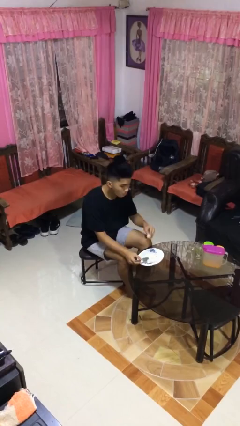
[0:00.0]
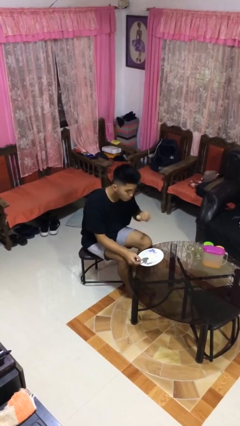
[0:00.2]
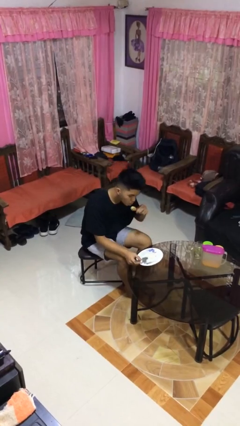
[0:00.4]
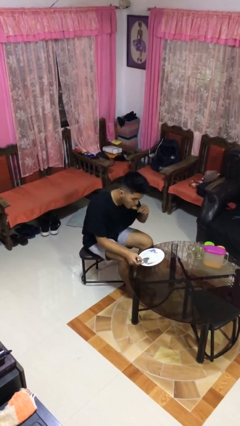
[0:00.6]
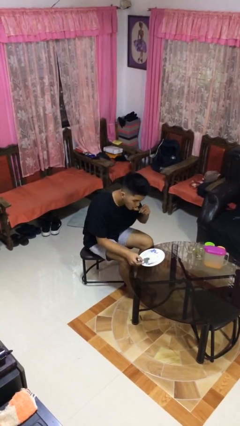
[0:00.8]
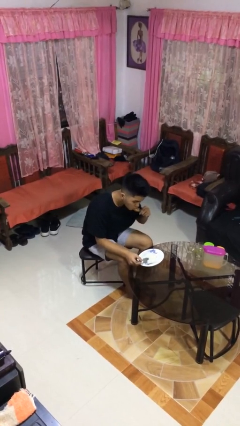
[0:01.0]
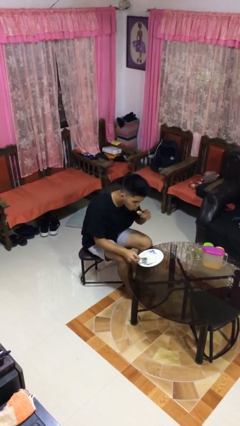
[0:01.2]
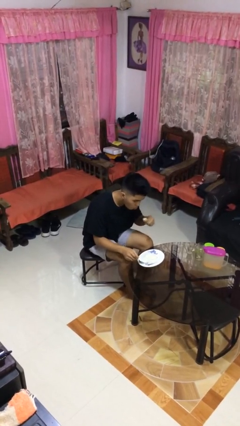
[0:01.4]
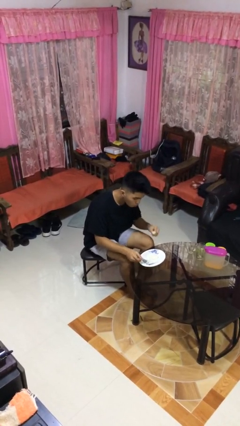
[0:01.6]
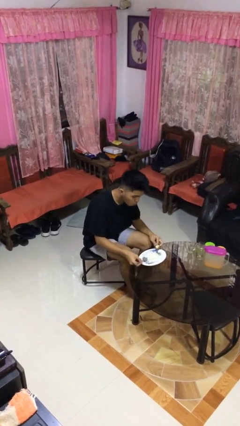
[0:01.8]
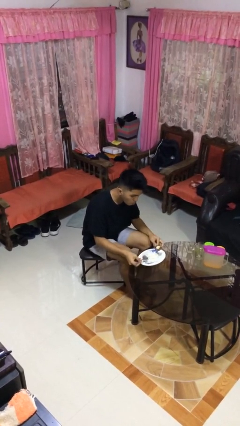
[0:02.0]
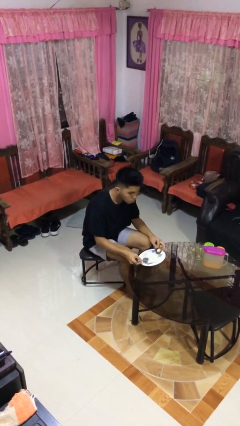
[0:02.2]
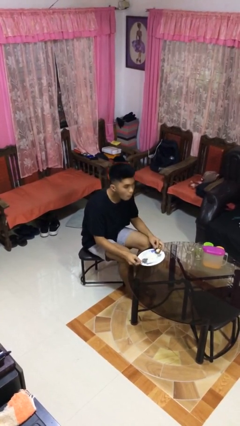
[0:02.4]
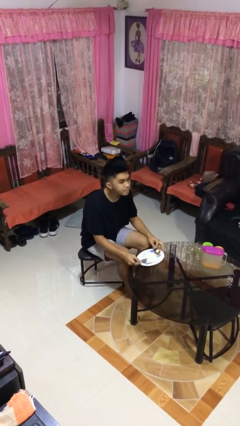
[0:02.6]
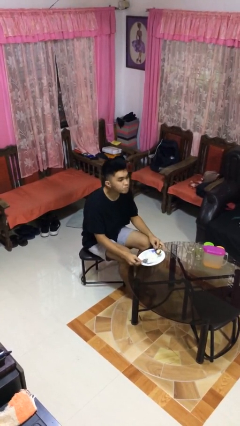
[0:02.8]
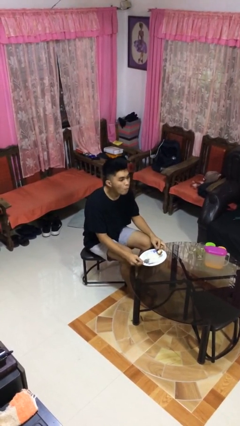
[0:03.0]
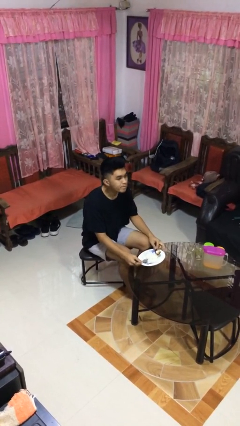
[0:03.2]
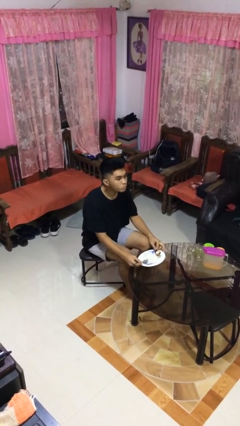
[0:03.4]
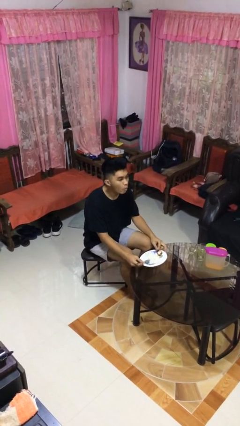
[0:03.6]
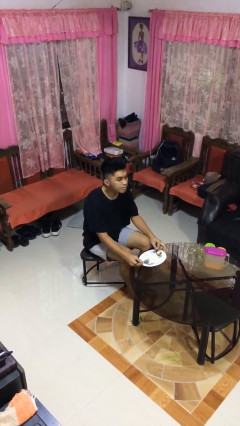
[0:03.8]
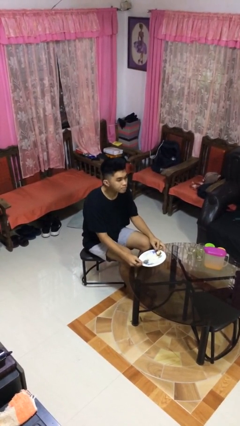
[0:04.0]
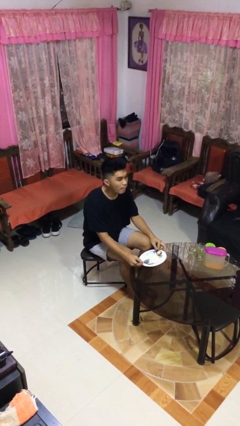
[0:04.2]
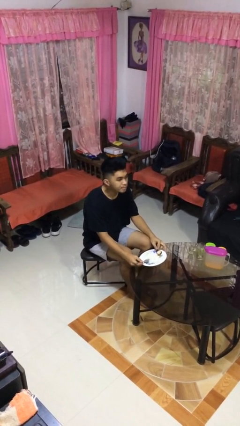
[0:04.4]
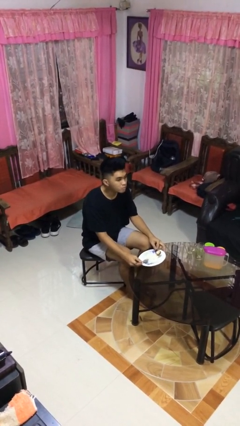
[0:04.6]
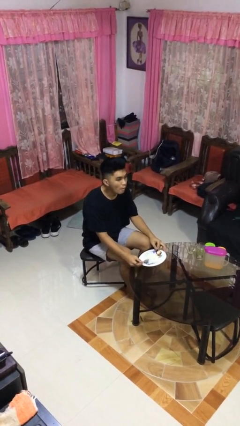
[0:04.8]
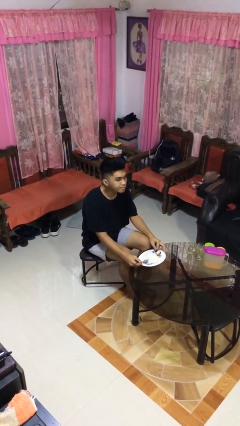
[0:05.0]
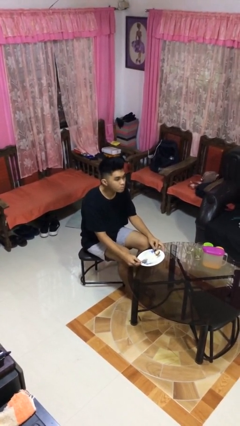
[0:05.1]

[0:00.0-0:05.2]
person eats with utensil

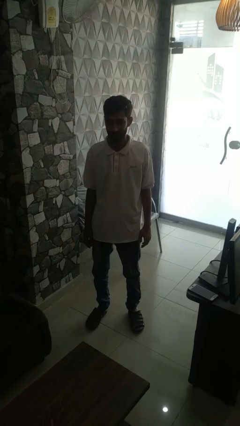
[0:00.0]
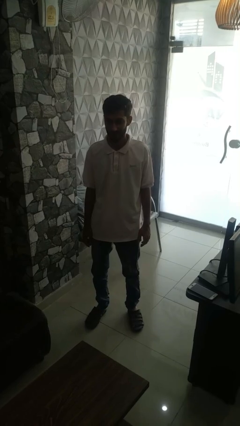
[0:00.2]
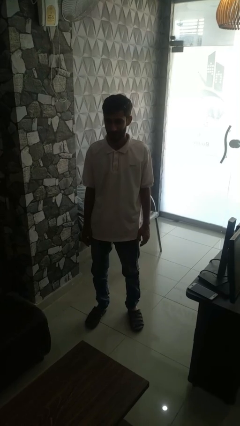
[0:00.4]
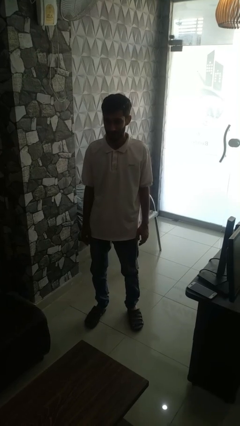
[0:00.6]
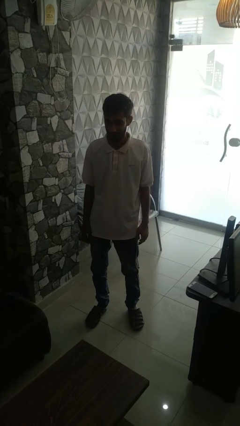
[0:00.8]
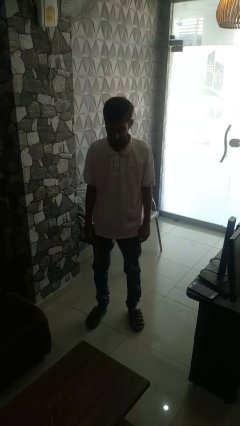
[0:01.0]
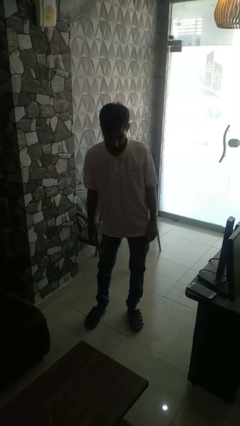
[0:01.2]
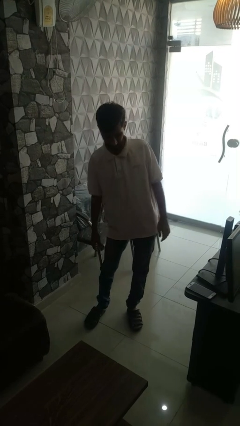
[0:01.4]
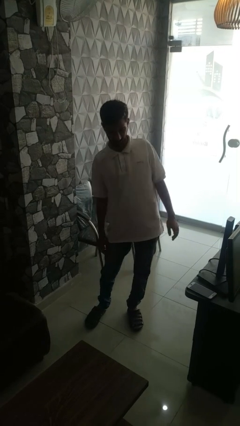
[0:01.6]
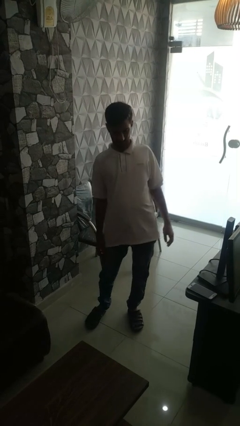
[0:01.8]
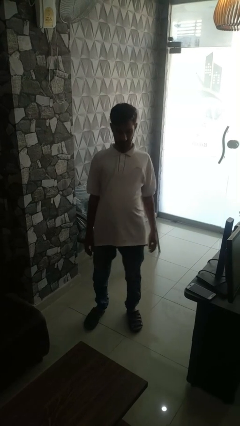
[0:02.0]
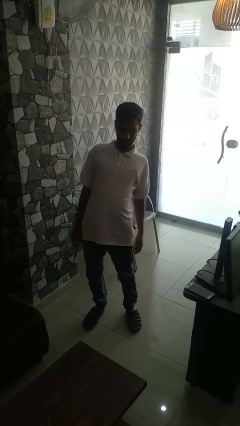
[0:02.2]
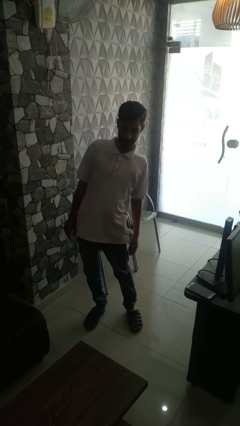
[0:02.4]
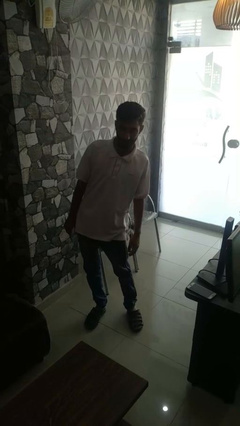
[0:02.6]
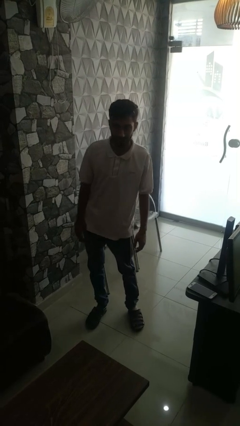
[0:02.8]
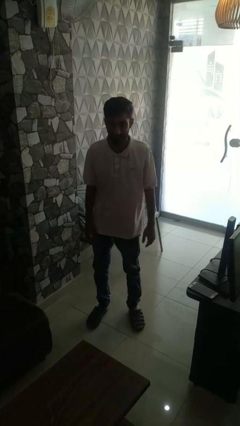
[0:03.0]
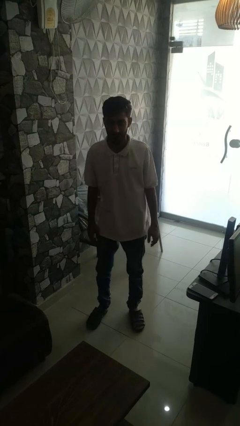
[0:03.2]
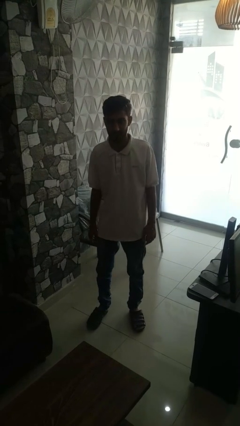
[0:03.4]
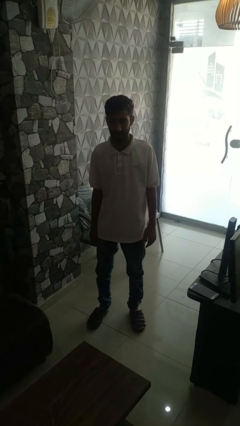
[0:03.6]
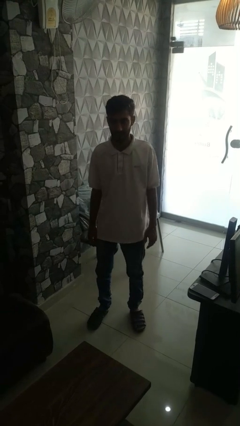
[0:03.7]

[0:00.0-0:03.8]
person wiggles hips

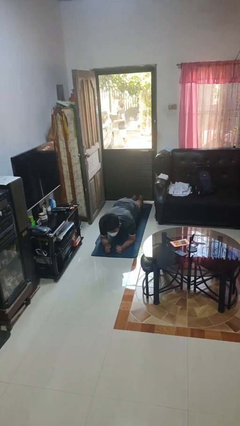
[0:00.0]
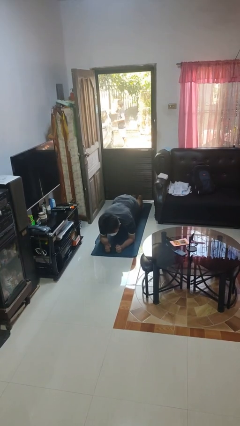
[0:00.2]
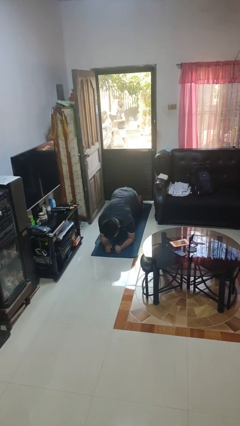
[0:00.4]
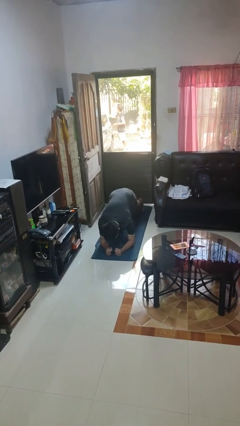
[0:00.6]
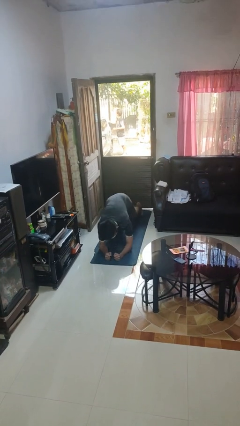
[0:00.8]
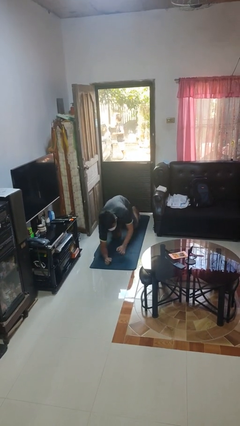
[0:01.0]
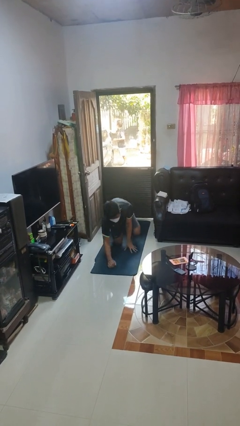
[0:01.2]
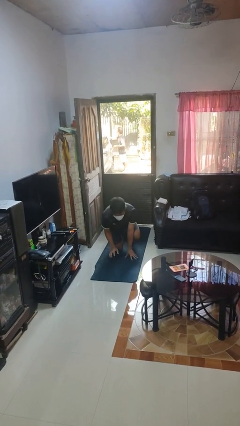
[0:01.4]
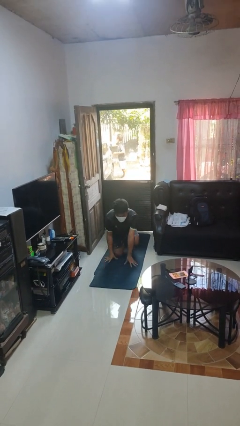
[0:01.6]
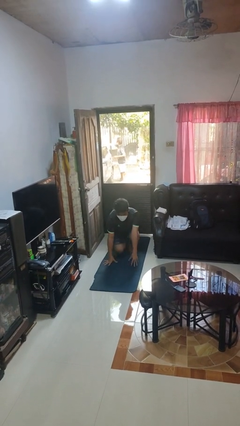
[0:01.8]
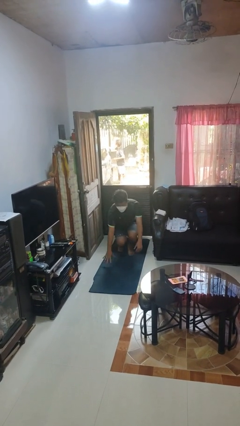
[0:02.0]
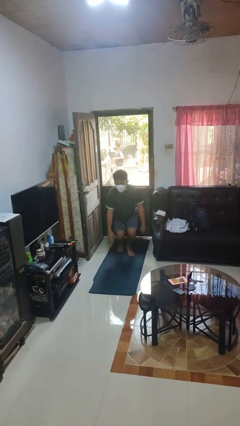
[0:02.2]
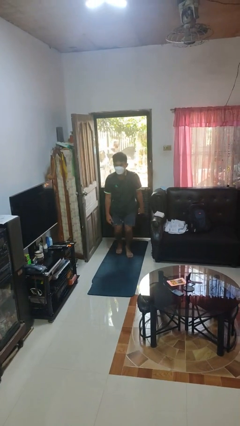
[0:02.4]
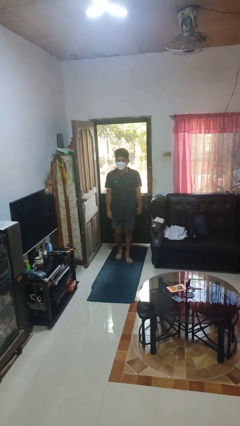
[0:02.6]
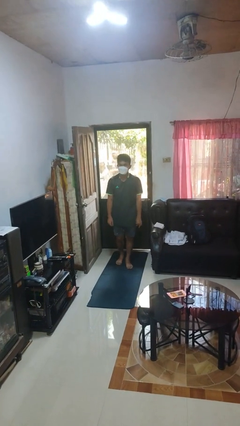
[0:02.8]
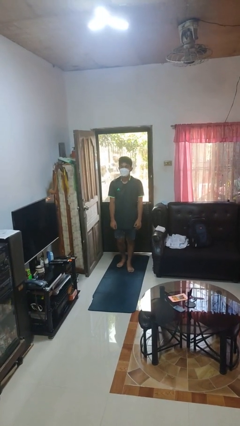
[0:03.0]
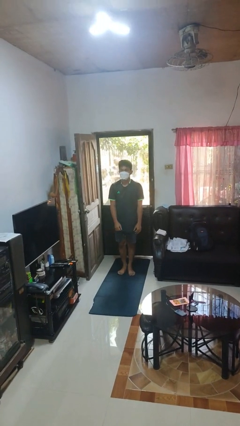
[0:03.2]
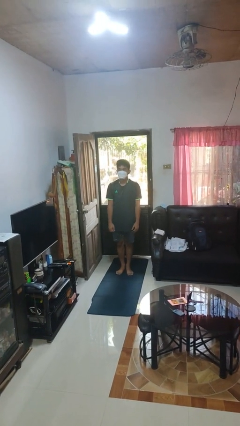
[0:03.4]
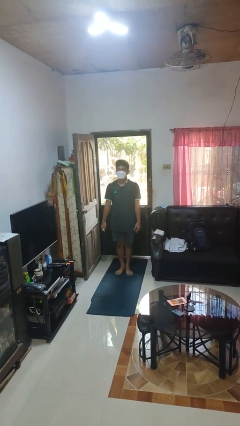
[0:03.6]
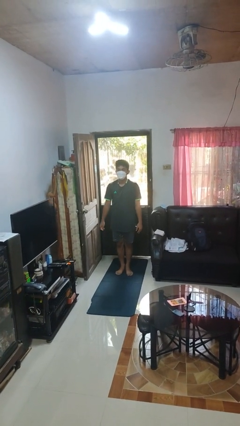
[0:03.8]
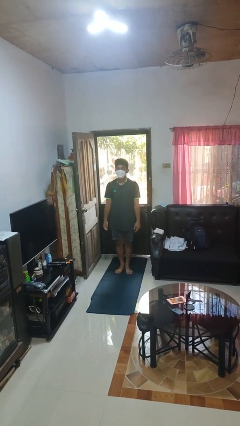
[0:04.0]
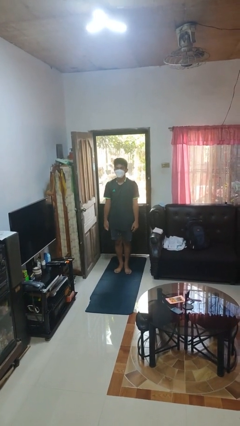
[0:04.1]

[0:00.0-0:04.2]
person stands up from floor

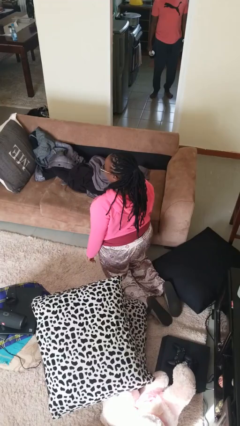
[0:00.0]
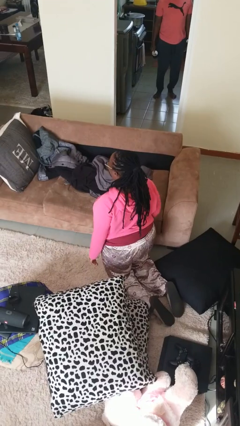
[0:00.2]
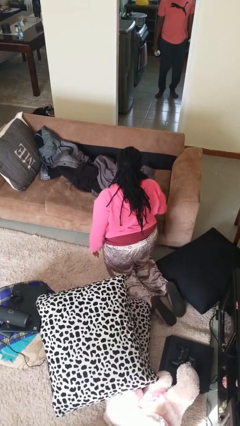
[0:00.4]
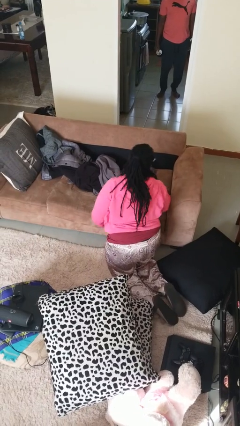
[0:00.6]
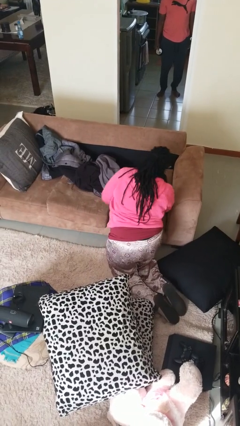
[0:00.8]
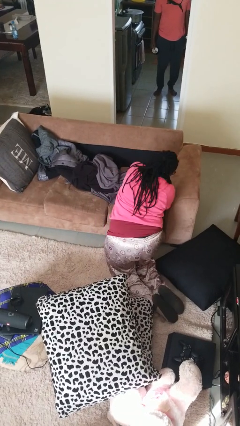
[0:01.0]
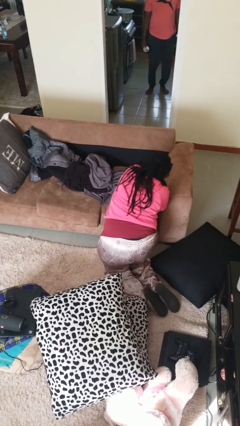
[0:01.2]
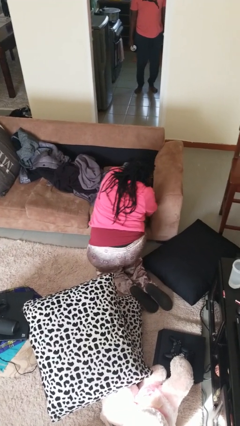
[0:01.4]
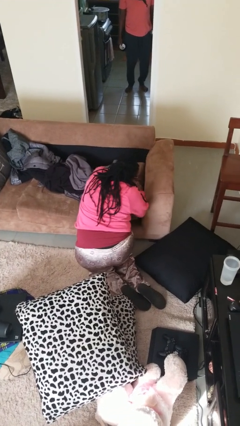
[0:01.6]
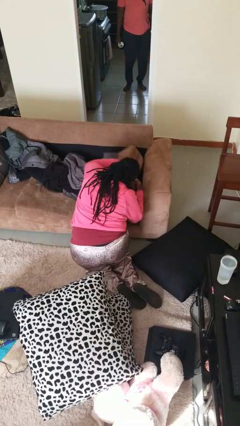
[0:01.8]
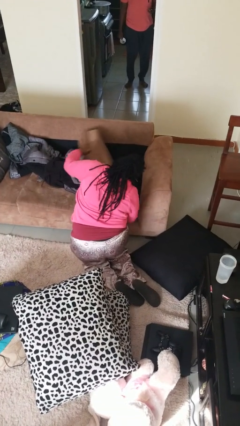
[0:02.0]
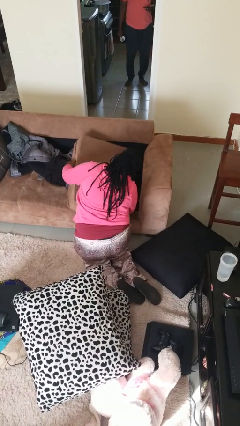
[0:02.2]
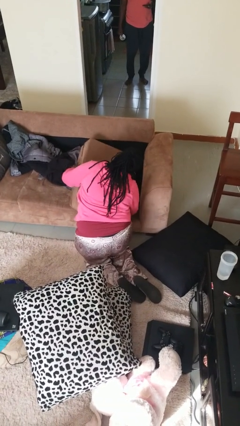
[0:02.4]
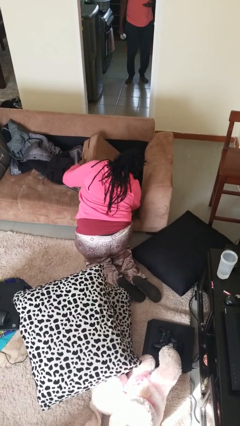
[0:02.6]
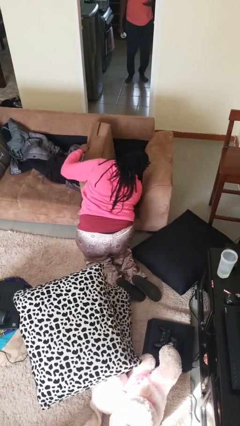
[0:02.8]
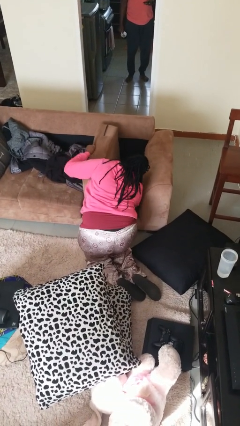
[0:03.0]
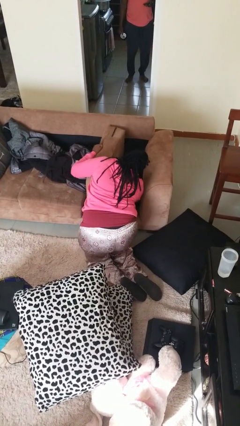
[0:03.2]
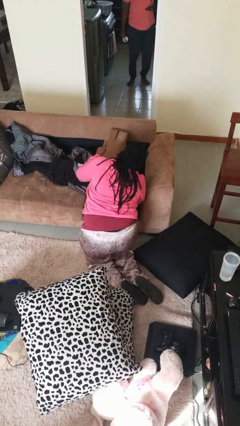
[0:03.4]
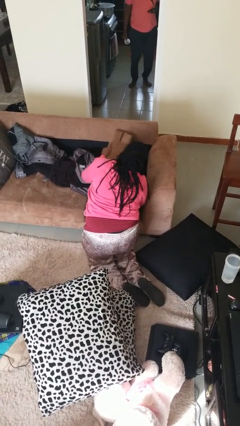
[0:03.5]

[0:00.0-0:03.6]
person searches under couch

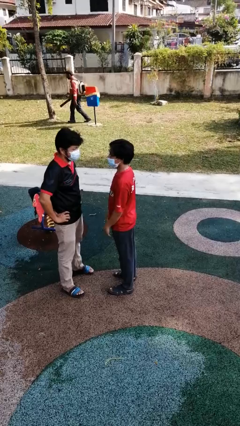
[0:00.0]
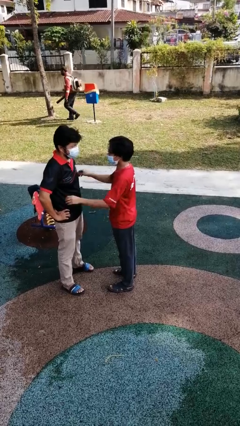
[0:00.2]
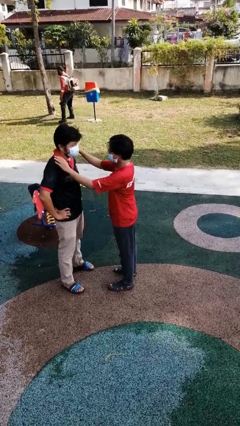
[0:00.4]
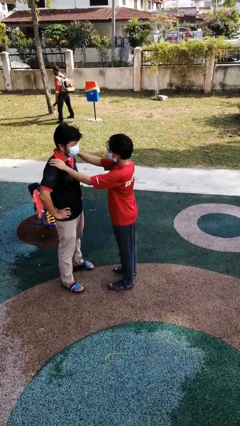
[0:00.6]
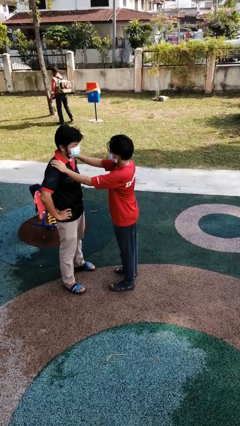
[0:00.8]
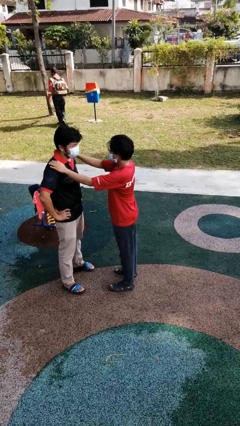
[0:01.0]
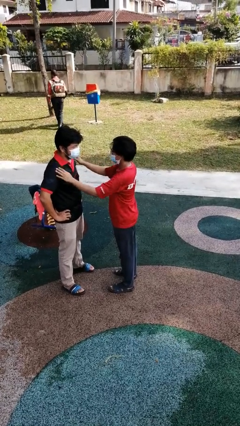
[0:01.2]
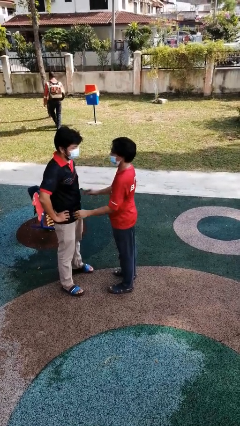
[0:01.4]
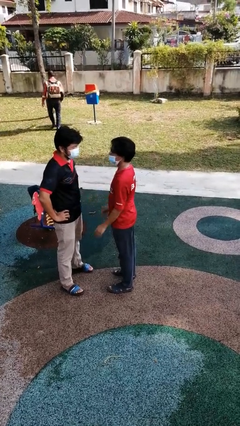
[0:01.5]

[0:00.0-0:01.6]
person pounds shoulders of person
